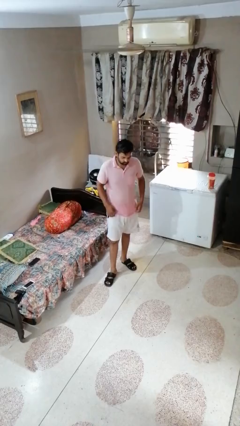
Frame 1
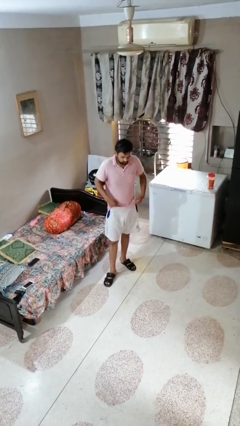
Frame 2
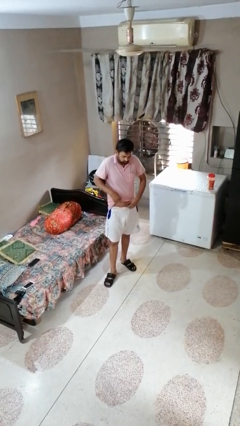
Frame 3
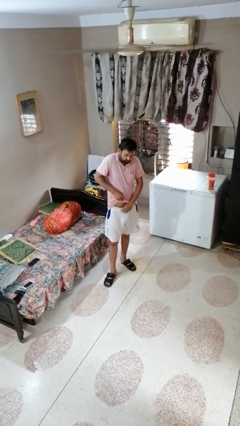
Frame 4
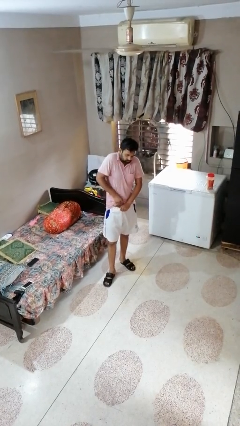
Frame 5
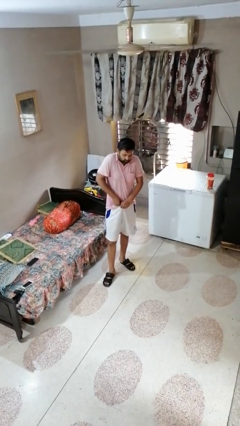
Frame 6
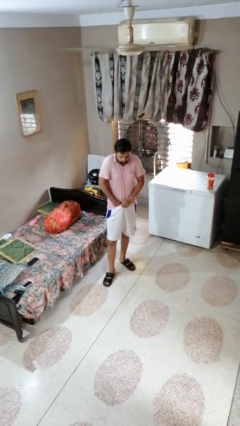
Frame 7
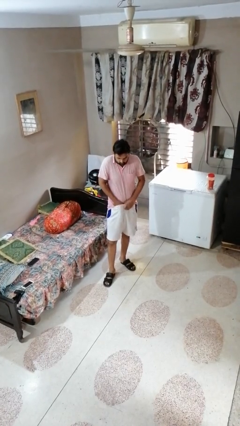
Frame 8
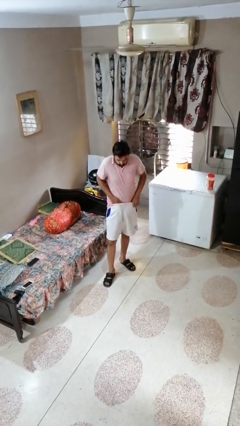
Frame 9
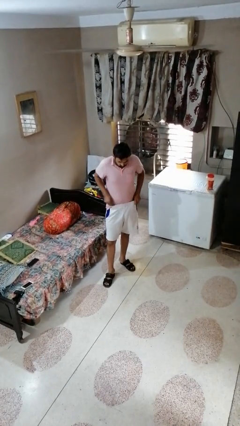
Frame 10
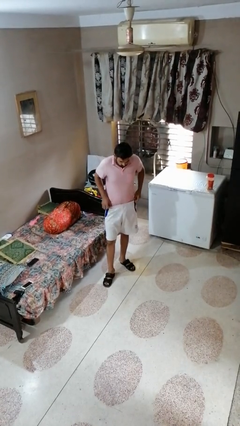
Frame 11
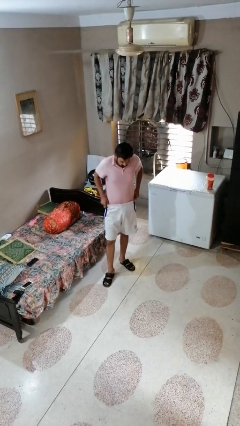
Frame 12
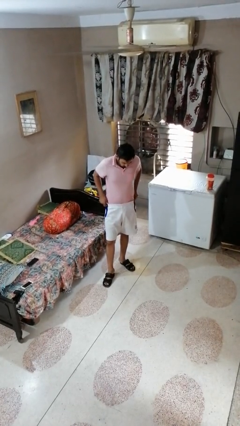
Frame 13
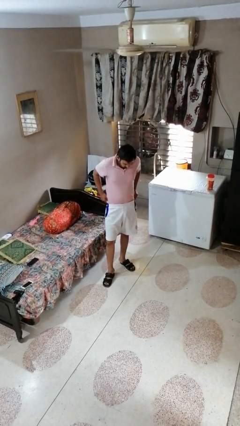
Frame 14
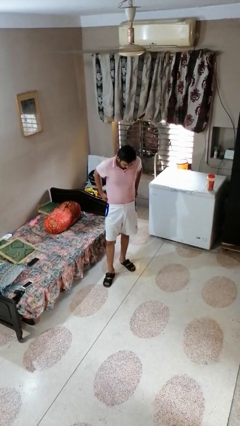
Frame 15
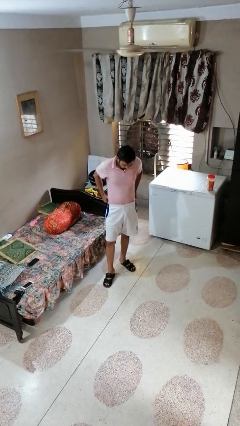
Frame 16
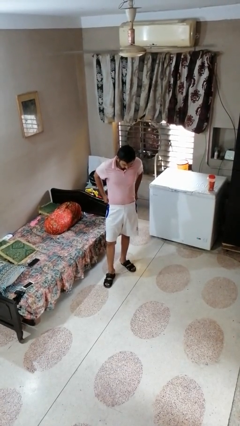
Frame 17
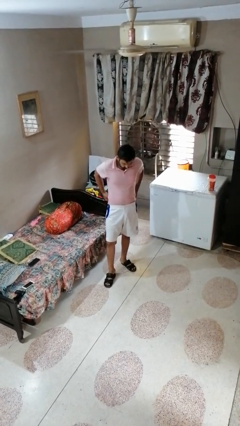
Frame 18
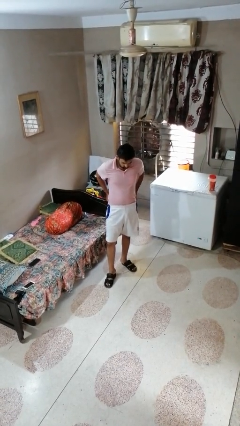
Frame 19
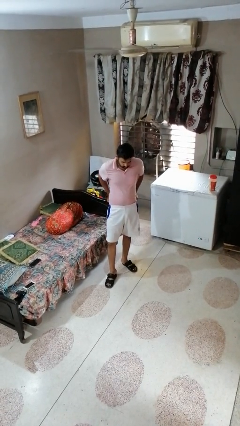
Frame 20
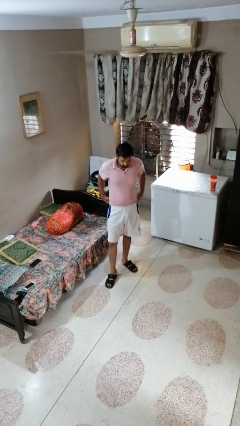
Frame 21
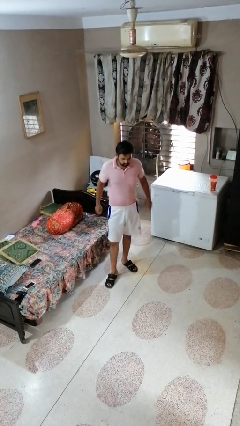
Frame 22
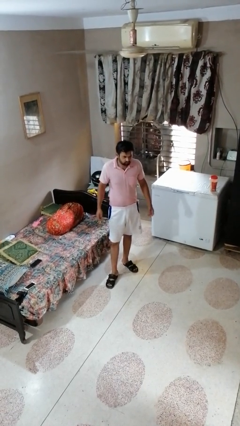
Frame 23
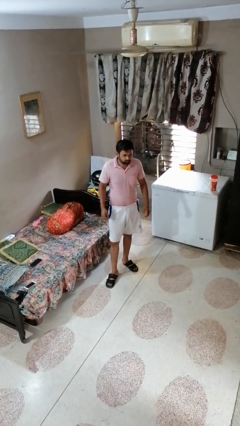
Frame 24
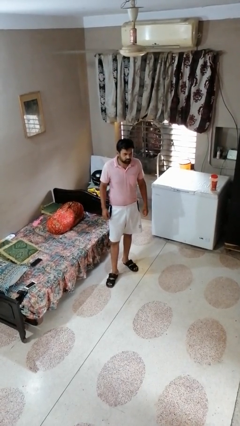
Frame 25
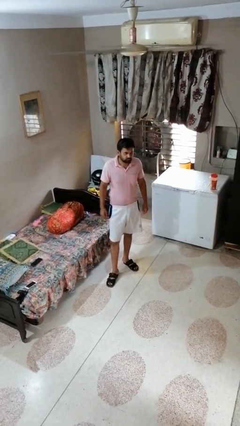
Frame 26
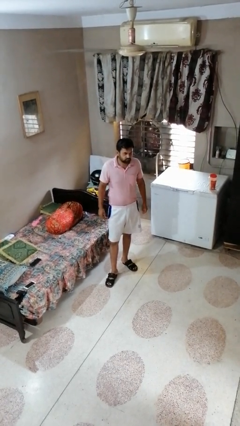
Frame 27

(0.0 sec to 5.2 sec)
person tucks in shirt

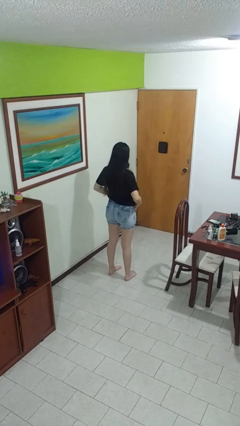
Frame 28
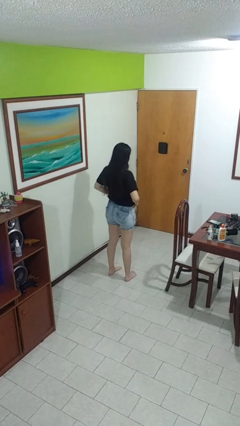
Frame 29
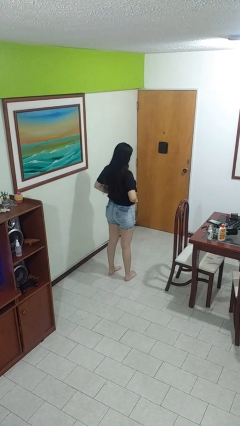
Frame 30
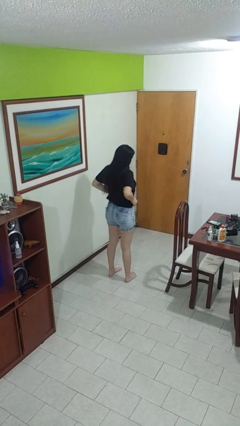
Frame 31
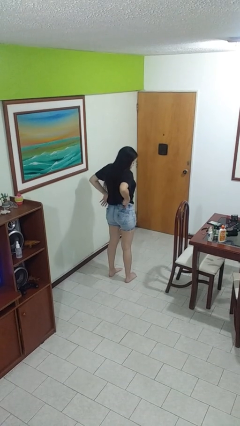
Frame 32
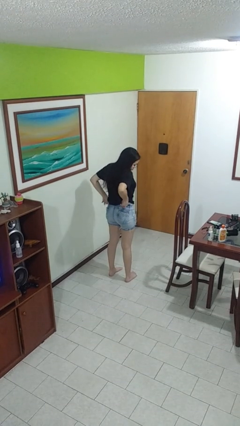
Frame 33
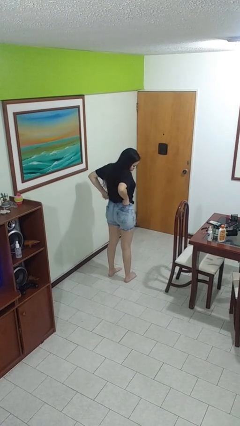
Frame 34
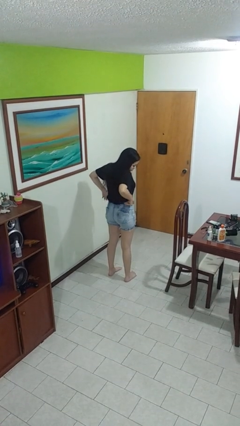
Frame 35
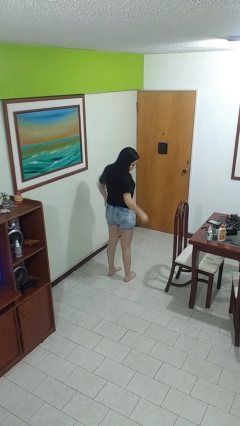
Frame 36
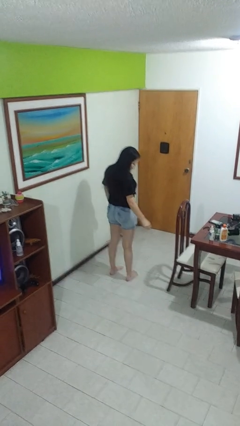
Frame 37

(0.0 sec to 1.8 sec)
person hikes up pants

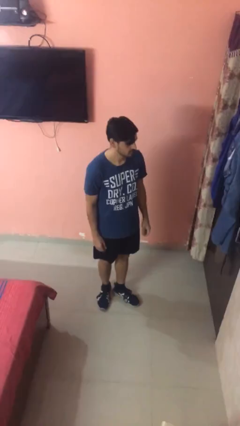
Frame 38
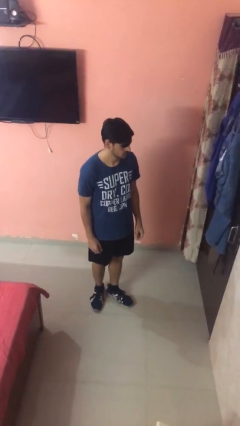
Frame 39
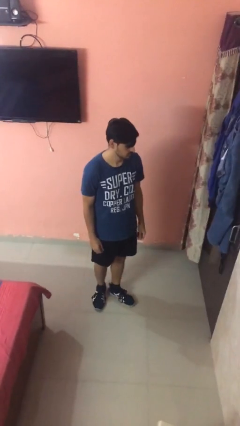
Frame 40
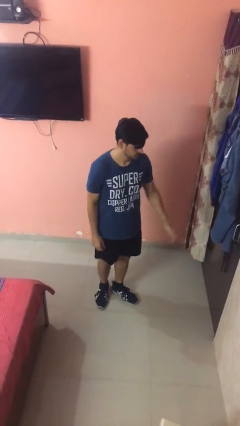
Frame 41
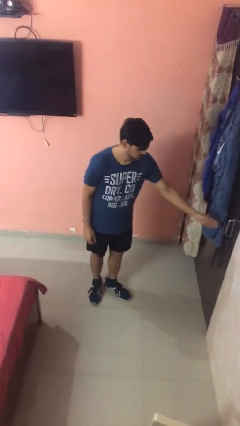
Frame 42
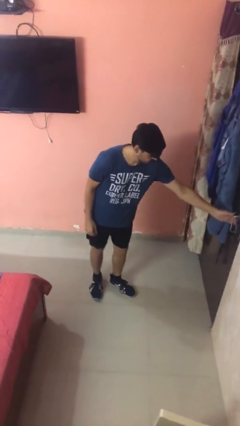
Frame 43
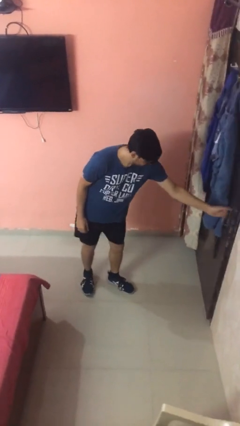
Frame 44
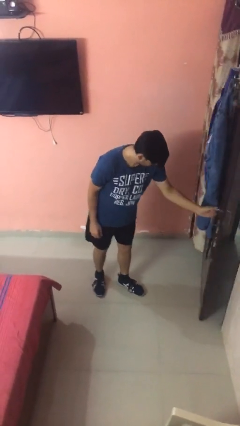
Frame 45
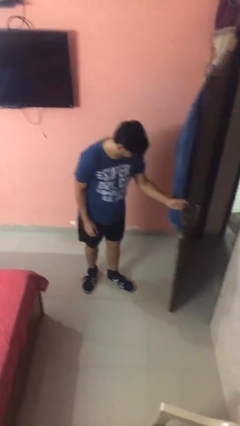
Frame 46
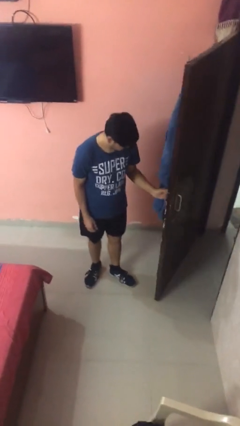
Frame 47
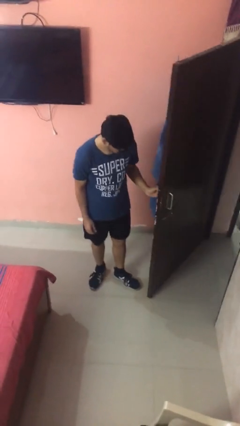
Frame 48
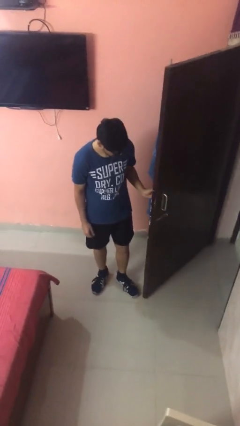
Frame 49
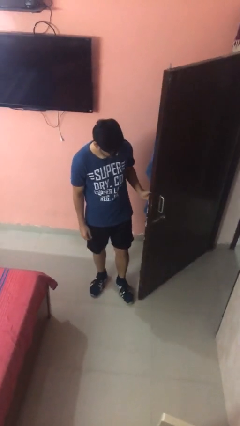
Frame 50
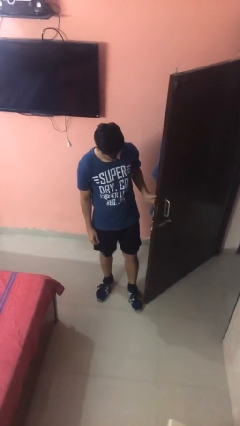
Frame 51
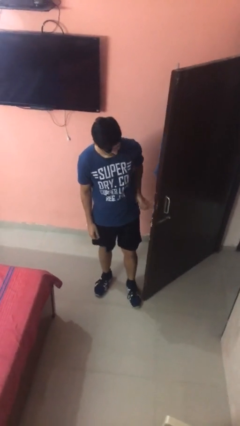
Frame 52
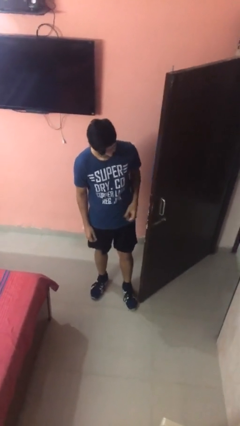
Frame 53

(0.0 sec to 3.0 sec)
person opens facility door

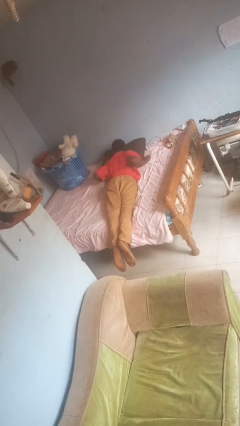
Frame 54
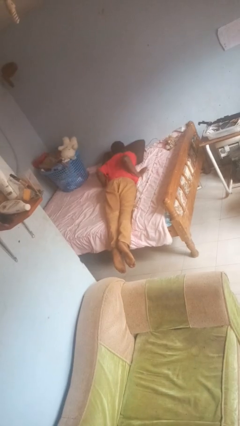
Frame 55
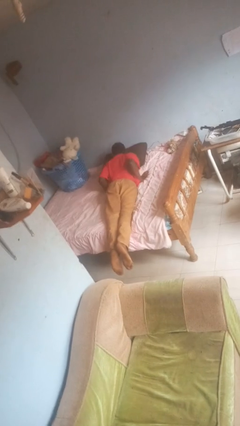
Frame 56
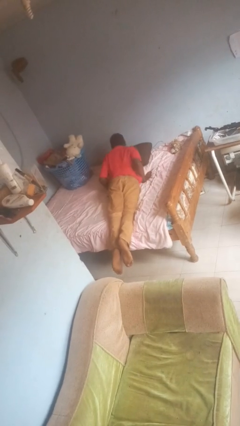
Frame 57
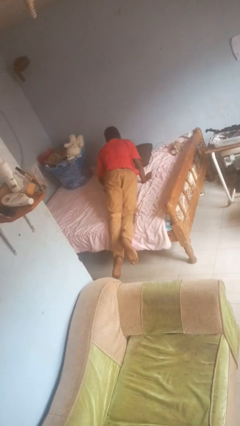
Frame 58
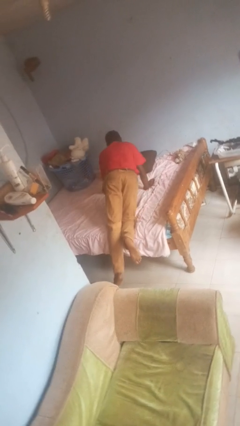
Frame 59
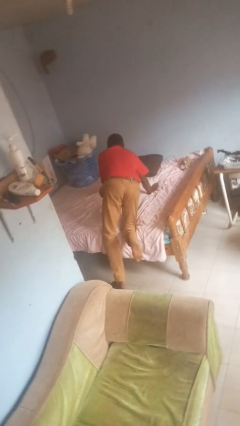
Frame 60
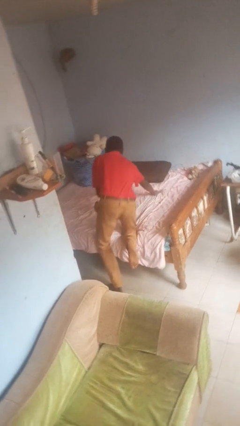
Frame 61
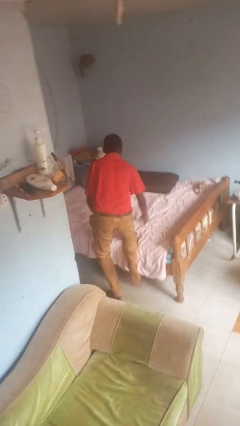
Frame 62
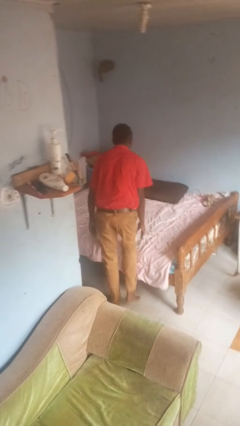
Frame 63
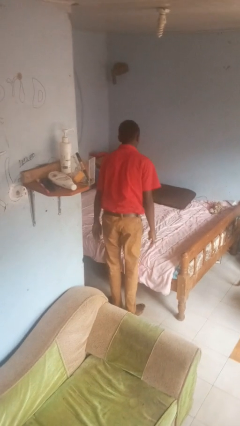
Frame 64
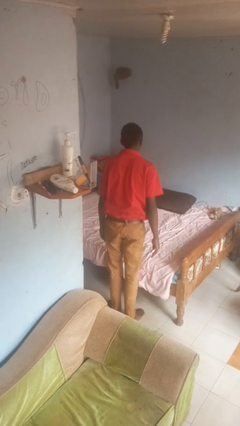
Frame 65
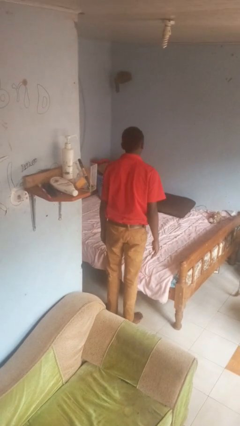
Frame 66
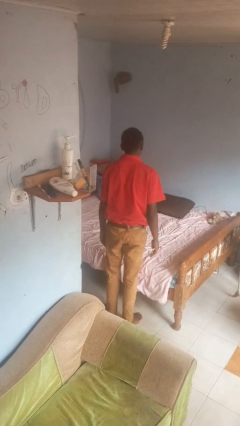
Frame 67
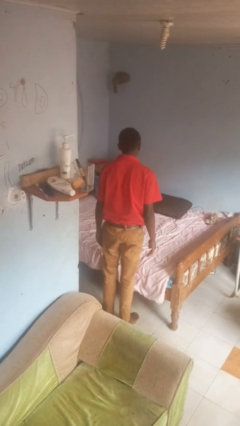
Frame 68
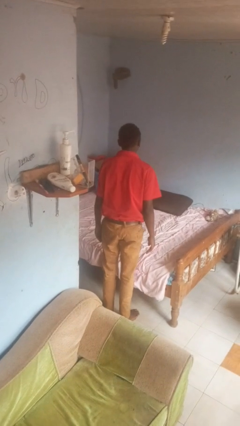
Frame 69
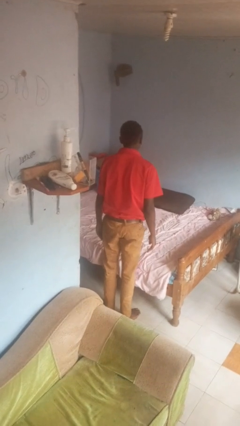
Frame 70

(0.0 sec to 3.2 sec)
person stands up

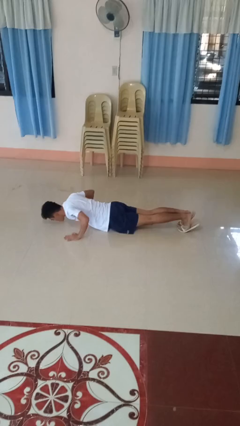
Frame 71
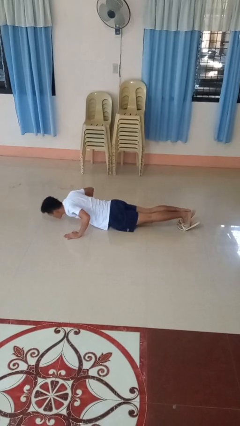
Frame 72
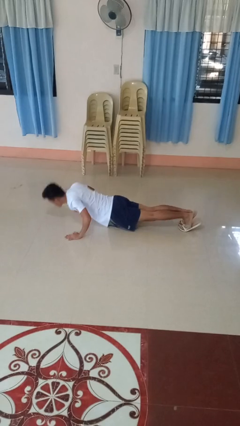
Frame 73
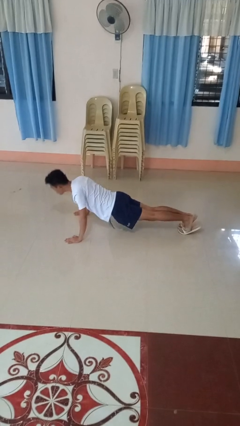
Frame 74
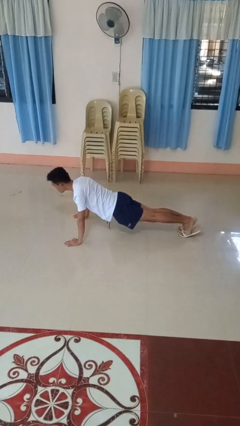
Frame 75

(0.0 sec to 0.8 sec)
person exercises with pushup

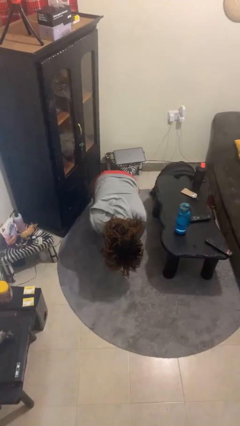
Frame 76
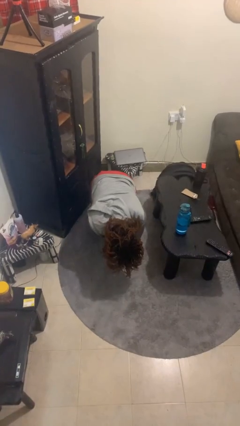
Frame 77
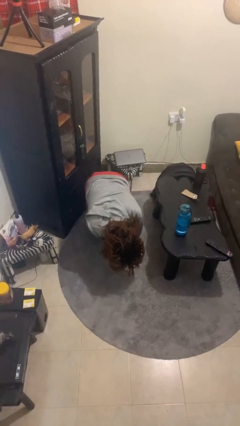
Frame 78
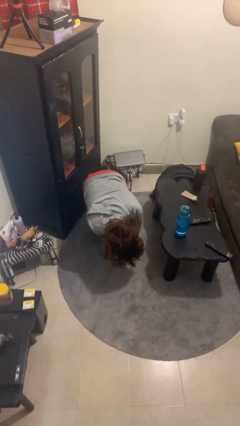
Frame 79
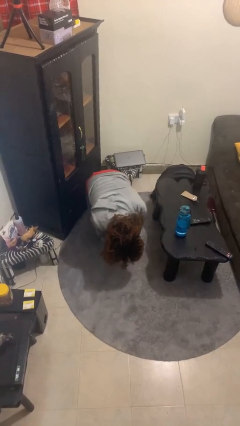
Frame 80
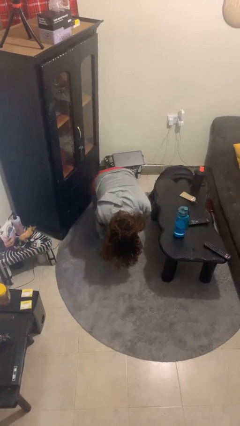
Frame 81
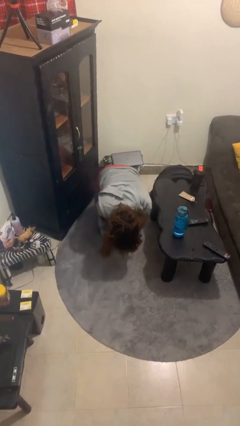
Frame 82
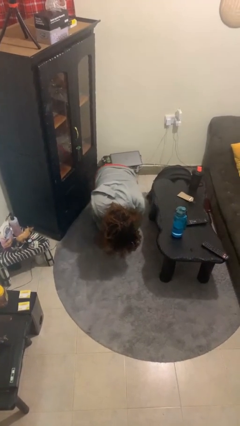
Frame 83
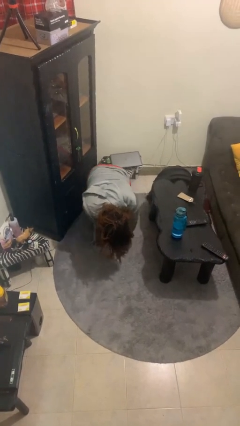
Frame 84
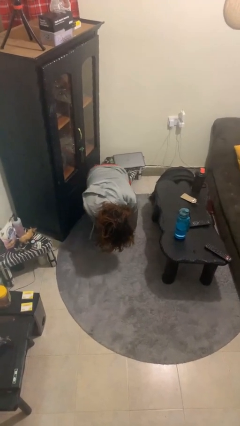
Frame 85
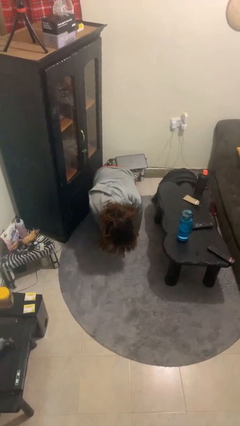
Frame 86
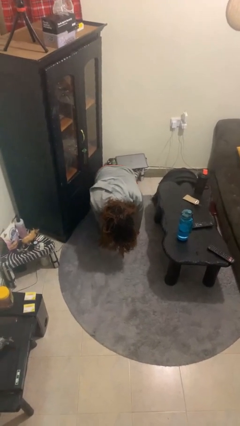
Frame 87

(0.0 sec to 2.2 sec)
person crawls

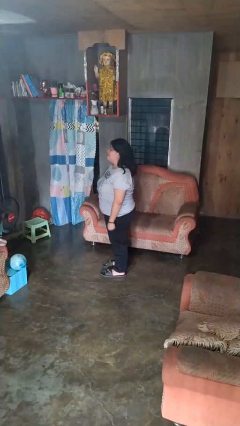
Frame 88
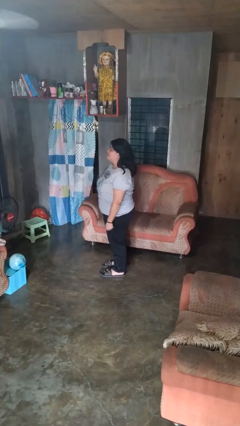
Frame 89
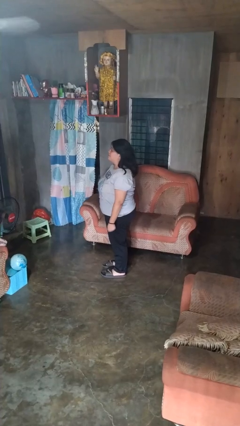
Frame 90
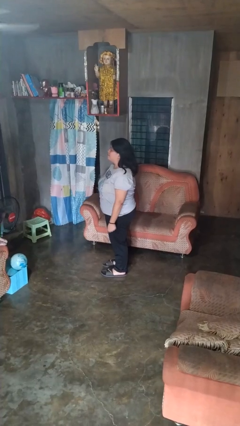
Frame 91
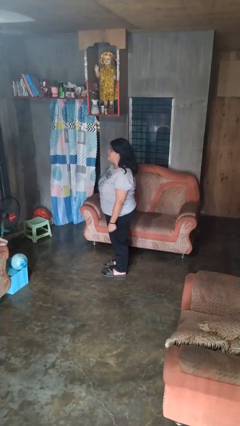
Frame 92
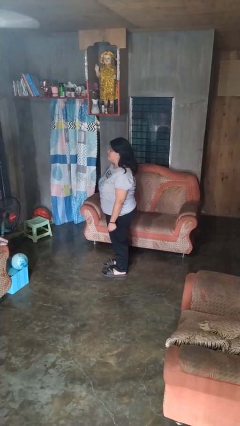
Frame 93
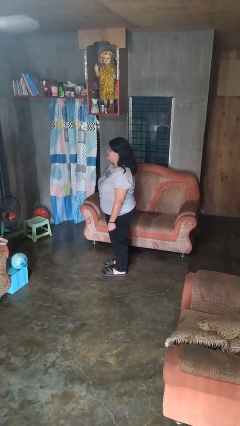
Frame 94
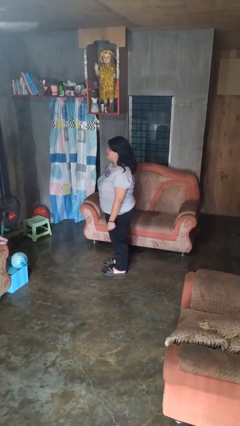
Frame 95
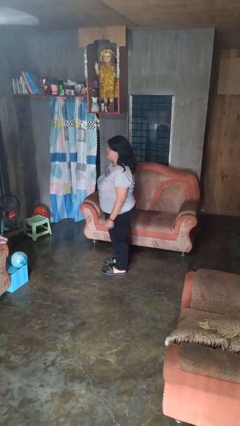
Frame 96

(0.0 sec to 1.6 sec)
person stretches arms to side
